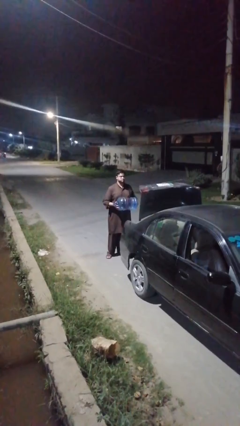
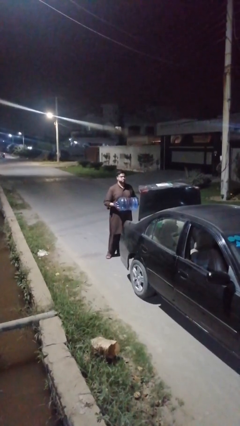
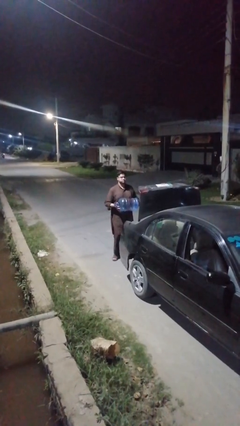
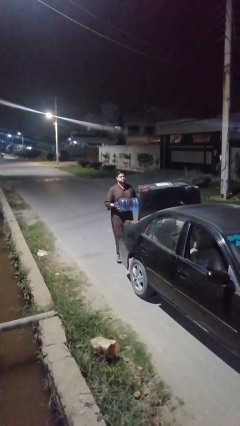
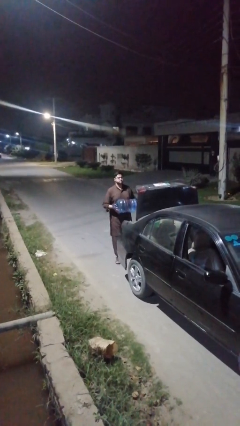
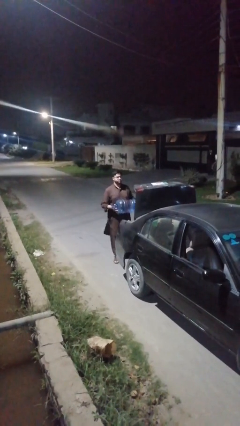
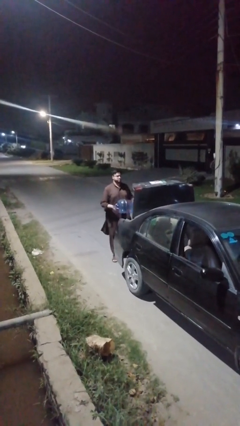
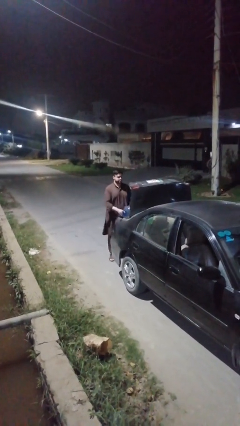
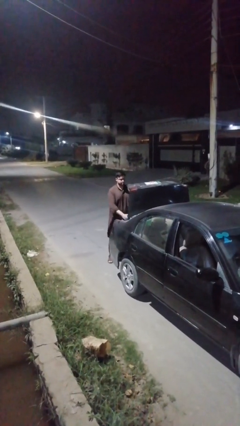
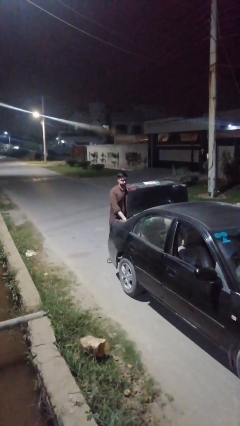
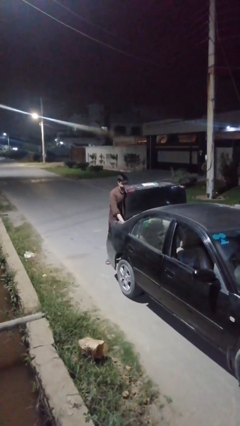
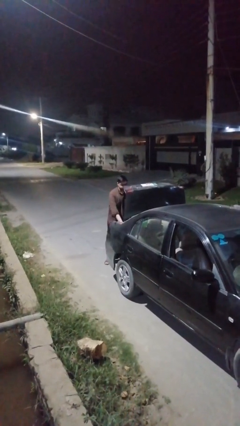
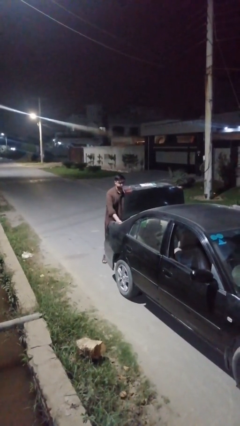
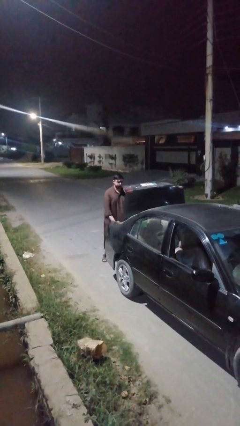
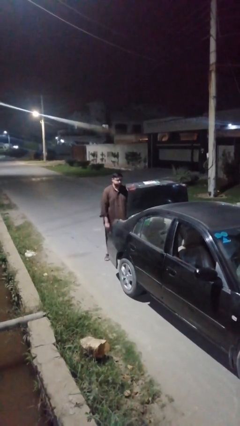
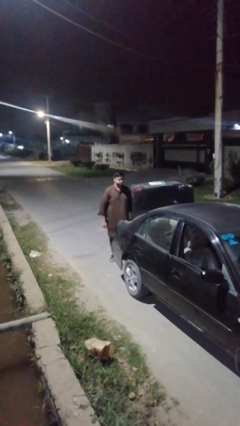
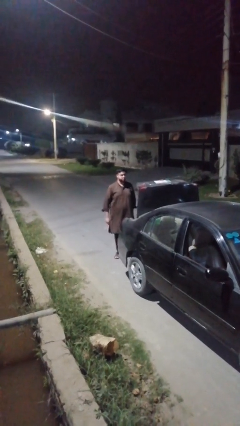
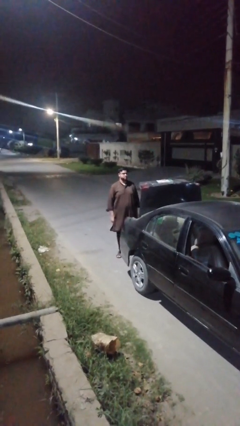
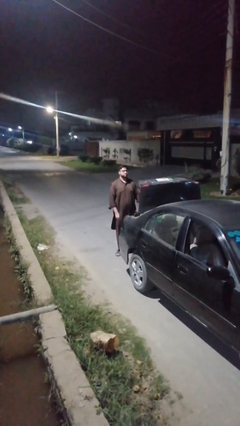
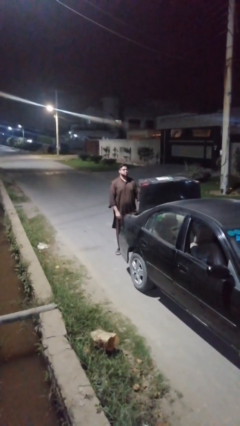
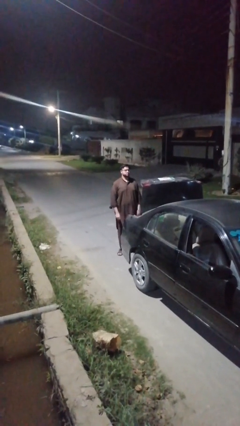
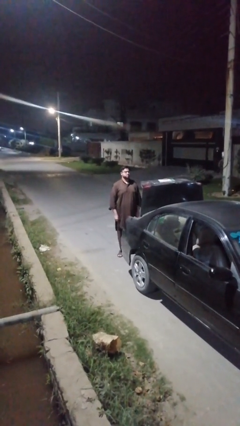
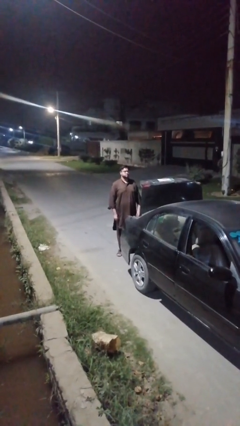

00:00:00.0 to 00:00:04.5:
person loads car

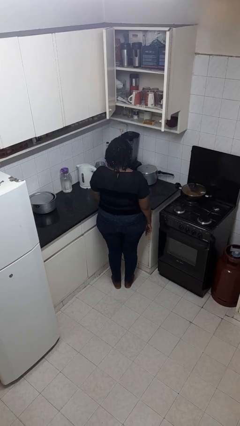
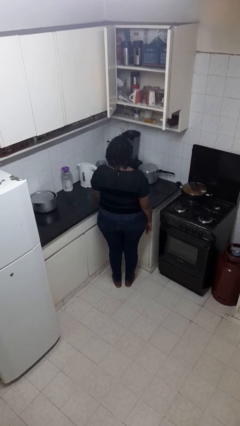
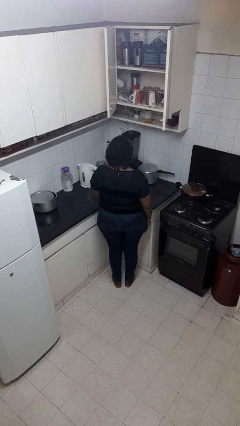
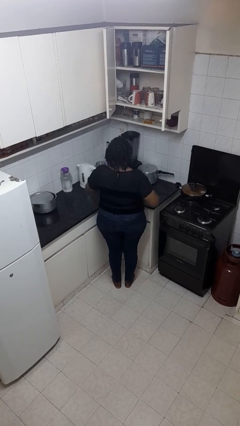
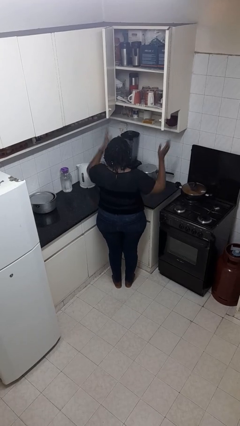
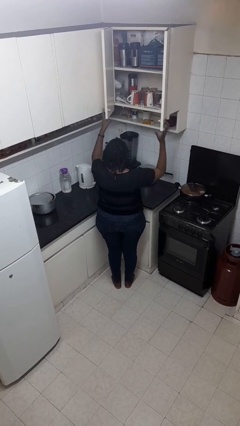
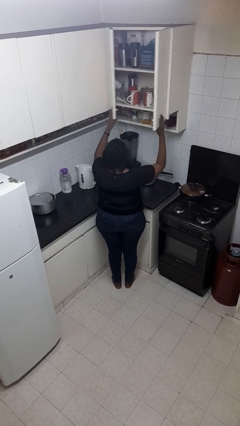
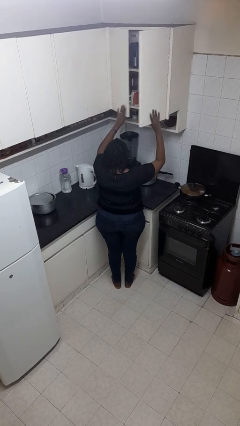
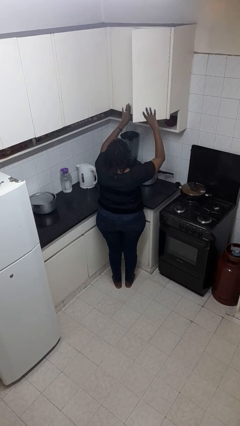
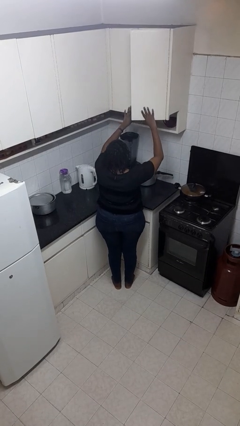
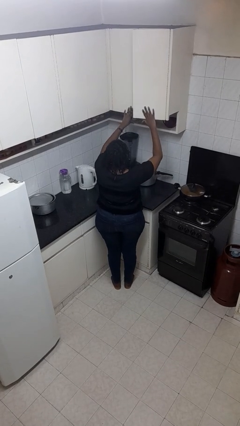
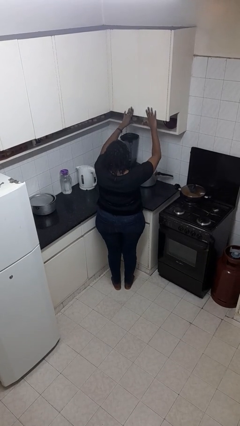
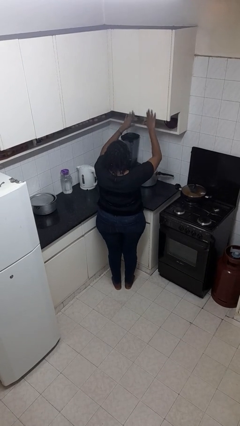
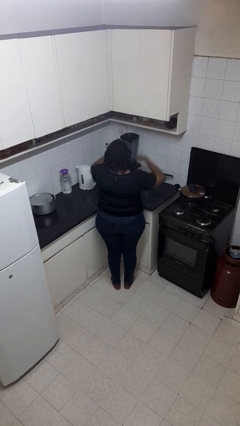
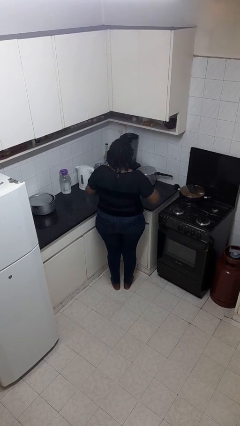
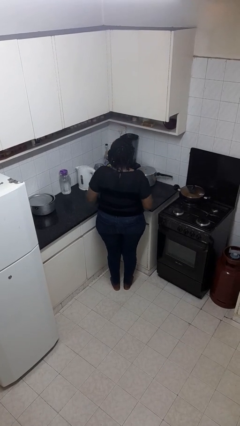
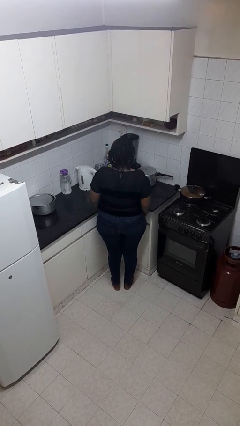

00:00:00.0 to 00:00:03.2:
person closes cabinet

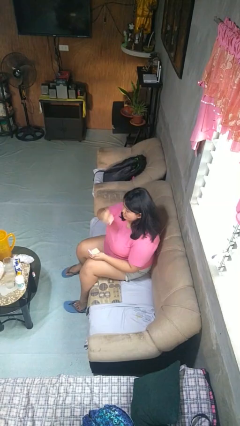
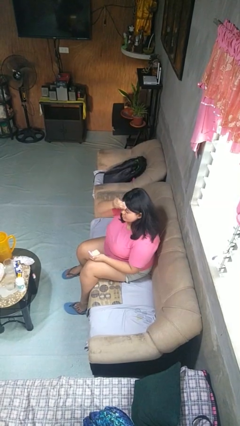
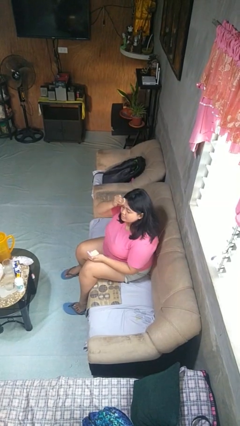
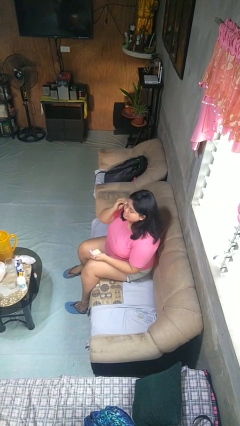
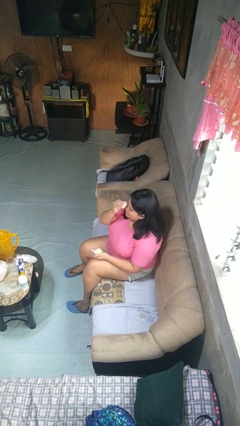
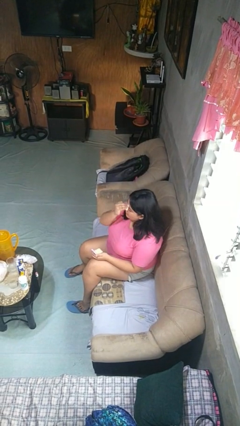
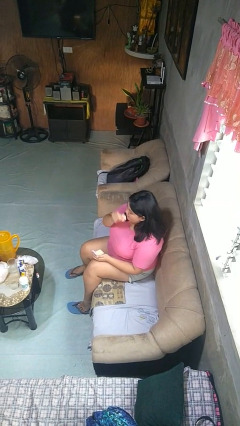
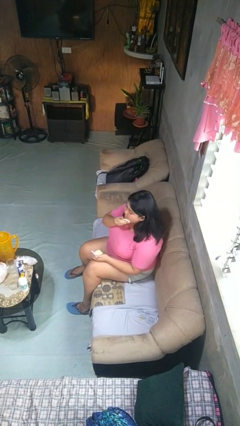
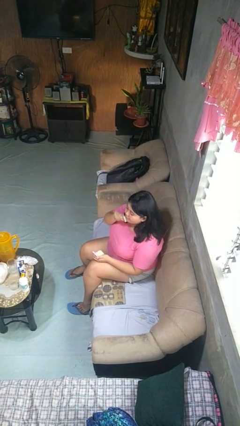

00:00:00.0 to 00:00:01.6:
person applies foundation makeup

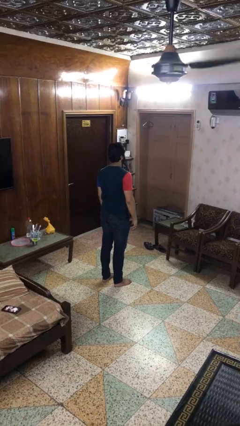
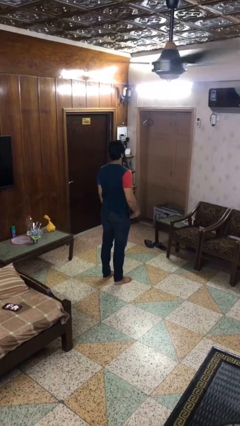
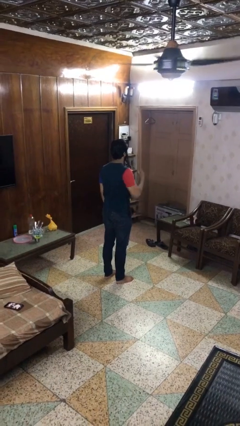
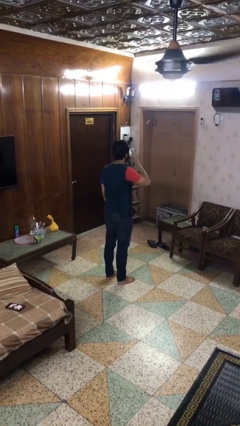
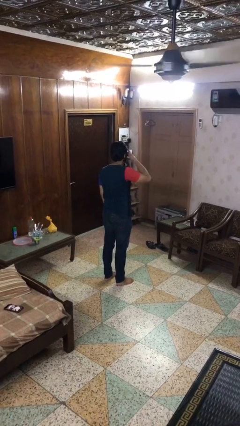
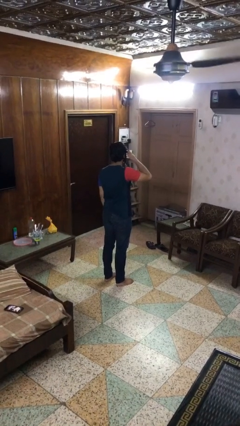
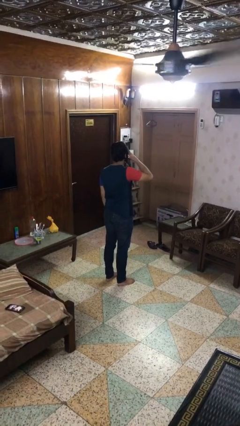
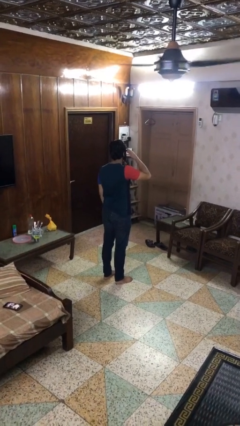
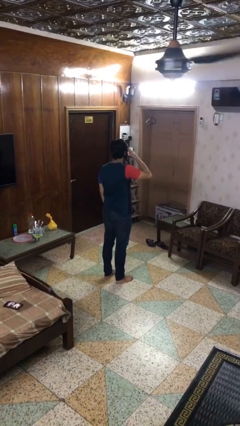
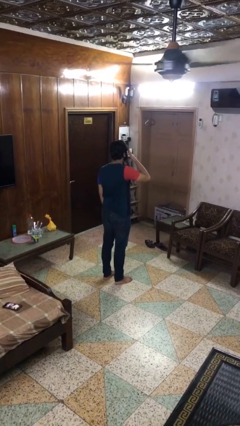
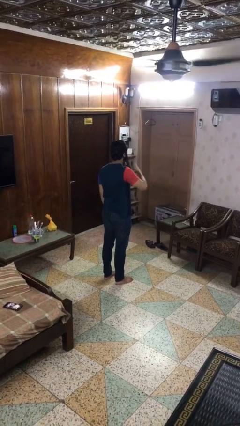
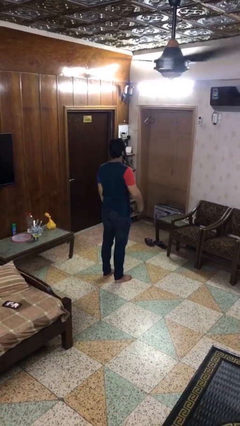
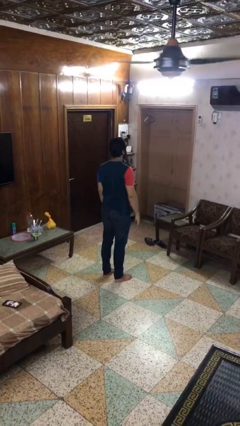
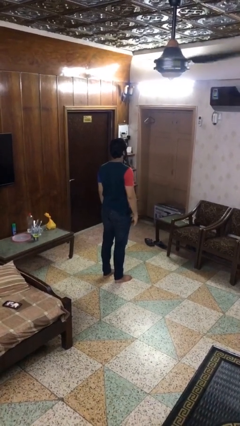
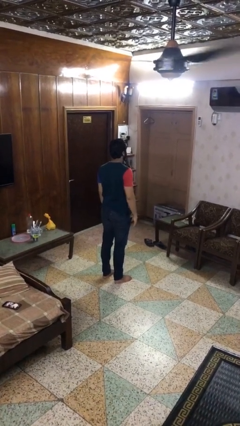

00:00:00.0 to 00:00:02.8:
person rubs eyes

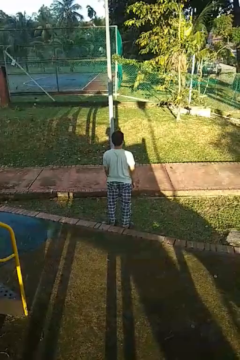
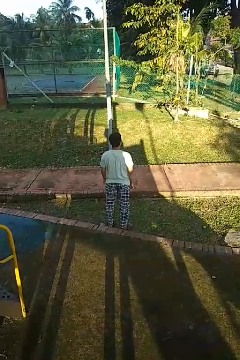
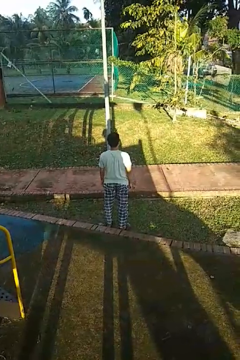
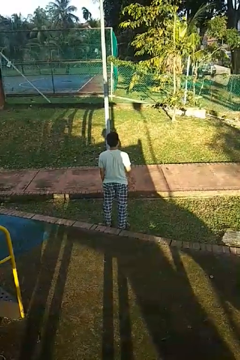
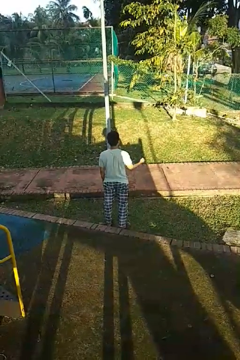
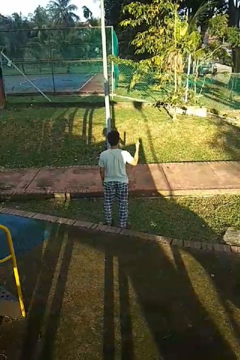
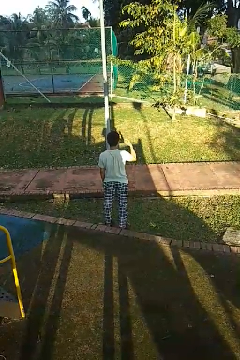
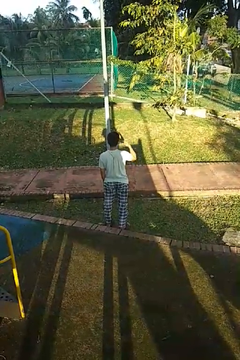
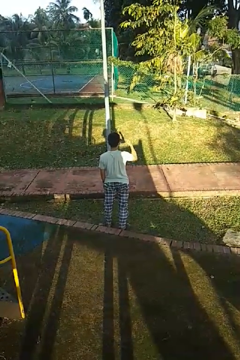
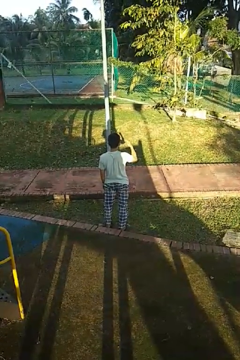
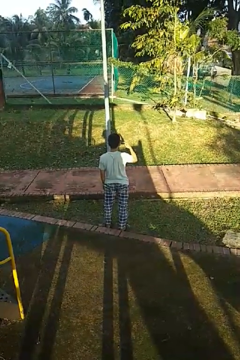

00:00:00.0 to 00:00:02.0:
person gestures listen closely

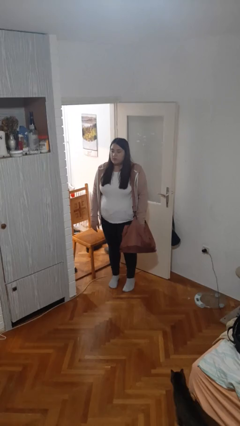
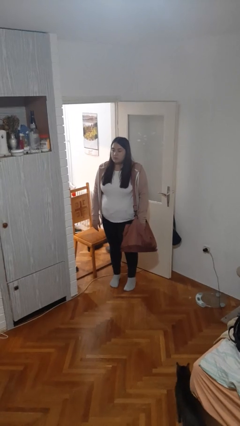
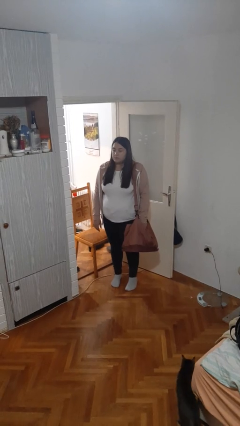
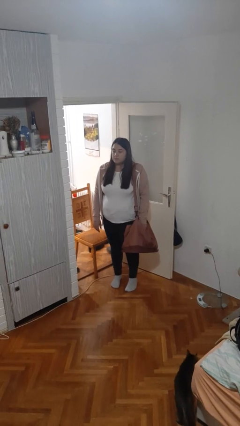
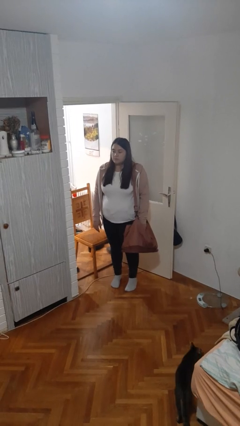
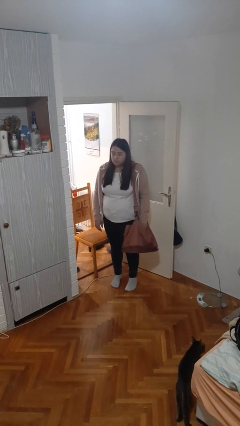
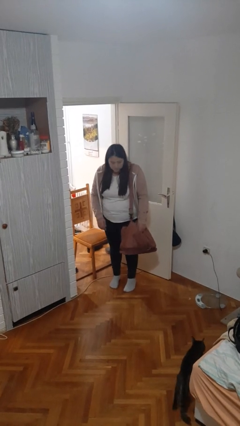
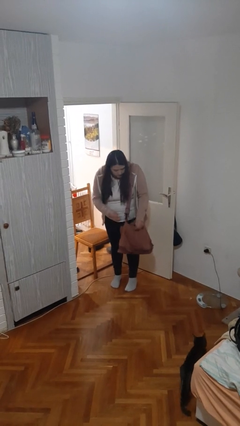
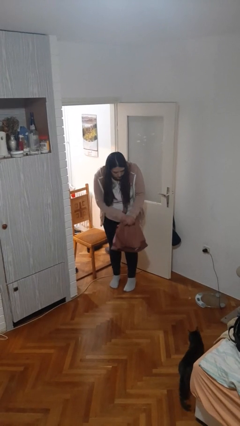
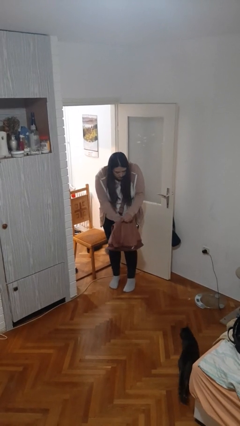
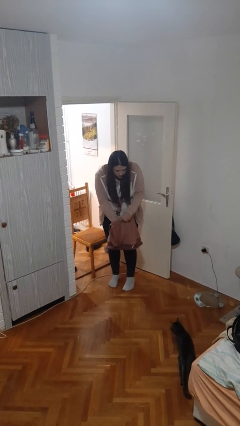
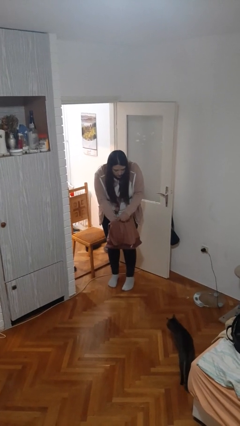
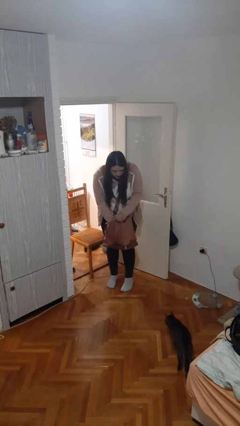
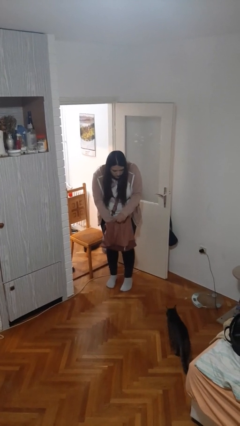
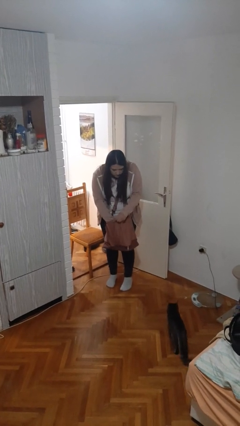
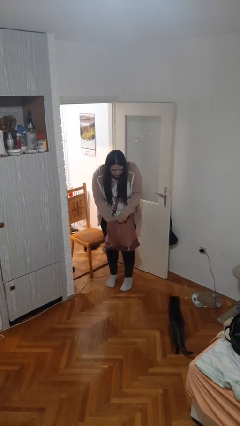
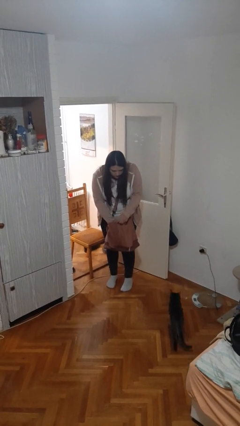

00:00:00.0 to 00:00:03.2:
person searches in purse

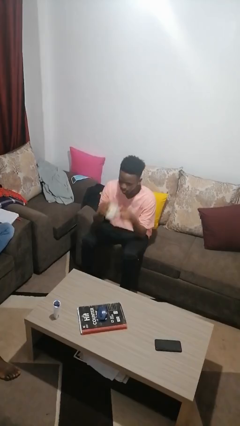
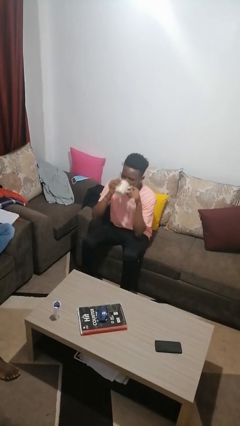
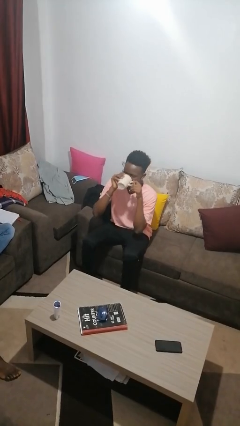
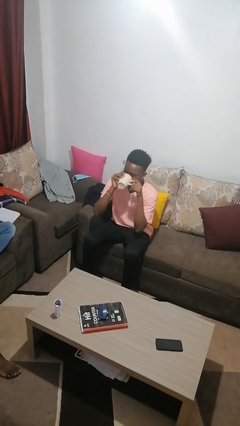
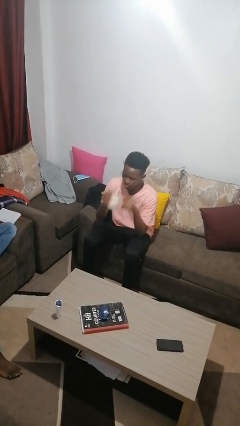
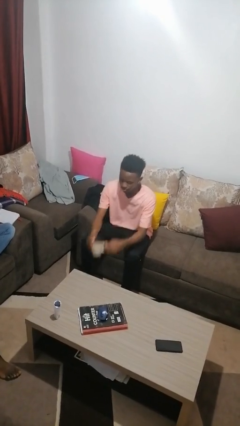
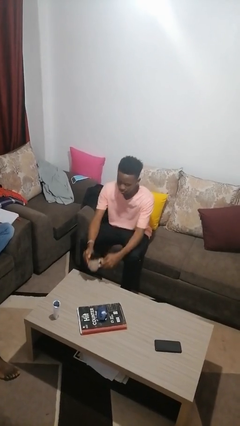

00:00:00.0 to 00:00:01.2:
person drinks from mug
